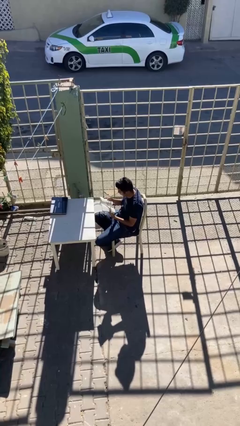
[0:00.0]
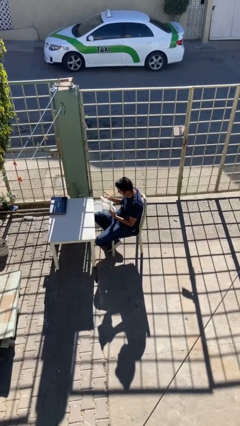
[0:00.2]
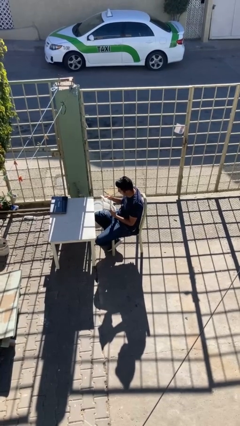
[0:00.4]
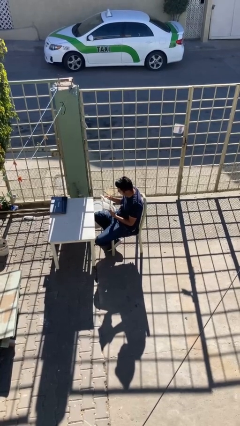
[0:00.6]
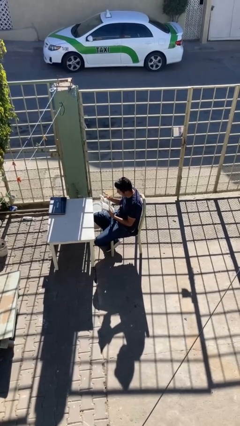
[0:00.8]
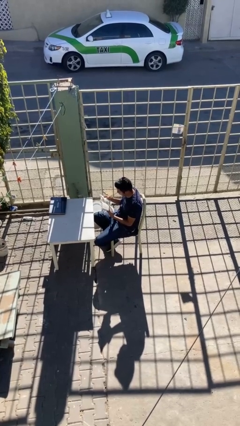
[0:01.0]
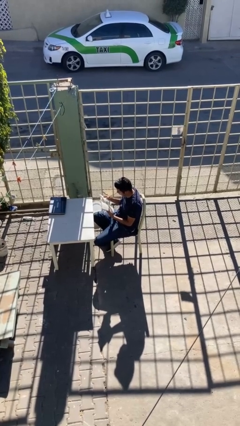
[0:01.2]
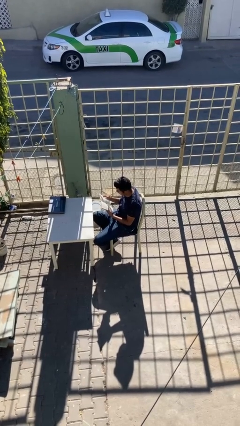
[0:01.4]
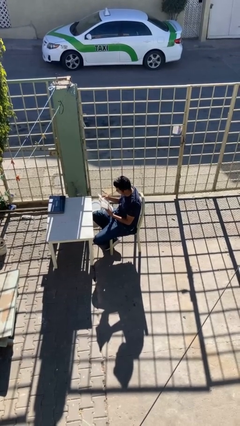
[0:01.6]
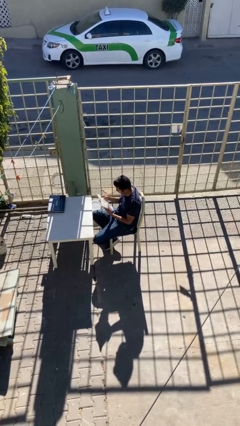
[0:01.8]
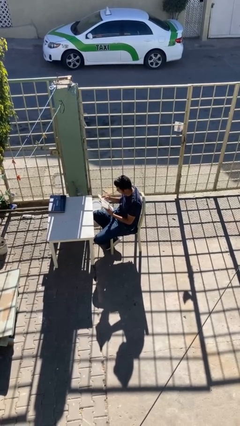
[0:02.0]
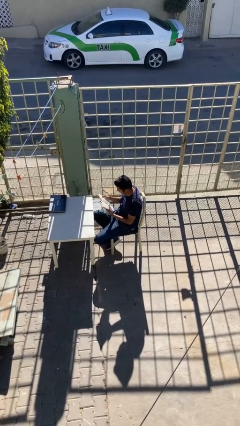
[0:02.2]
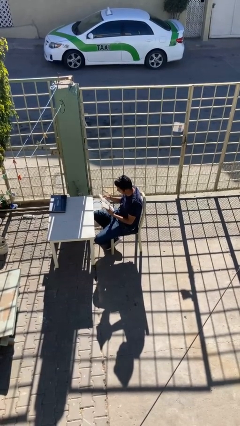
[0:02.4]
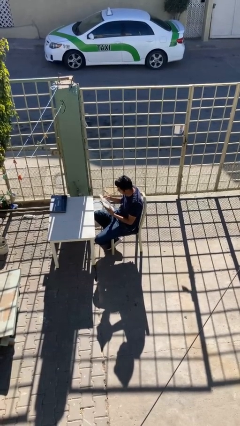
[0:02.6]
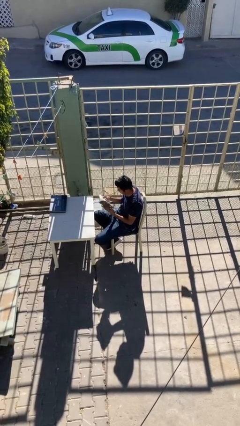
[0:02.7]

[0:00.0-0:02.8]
person reads document

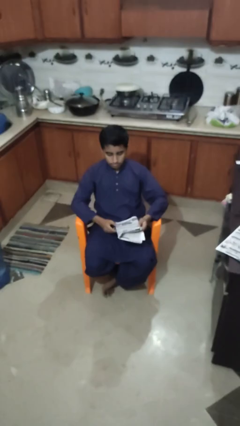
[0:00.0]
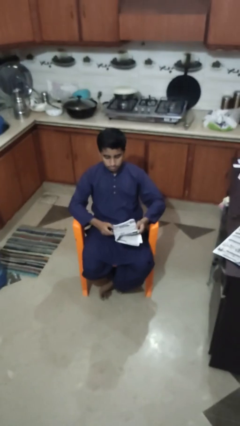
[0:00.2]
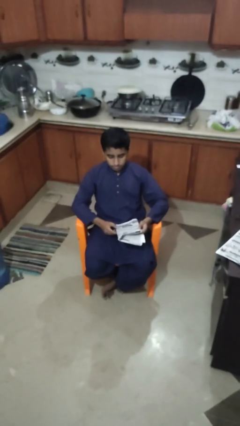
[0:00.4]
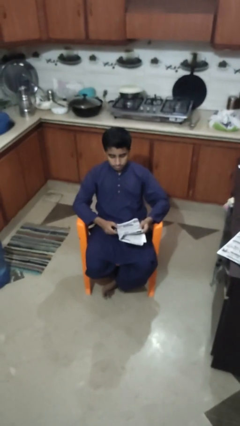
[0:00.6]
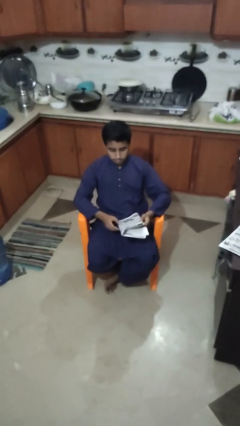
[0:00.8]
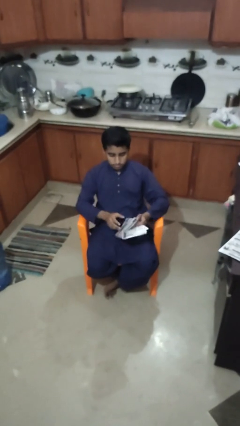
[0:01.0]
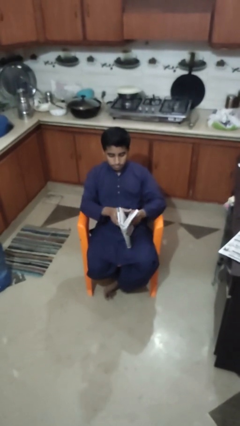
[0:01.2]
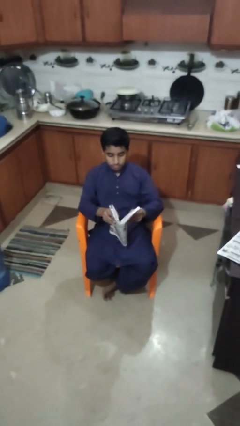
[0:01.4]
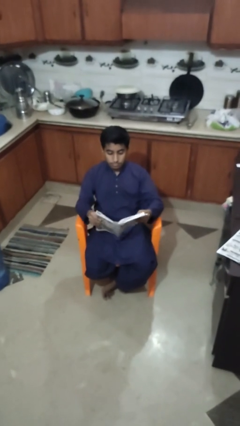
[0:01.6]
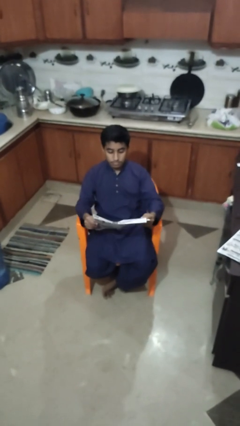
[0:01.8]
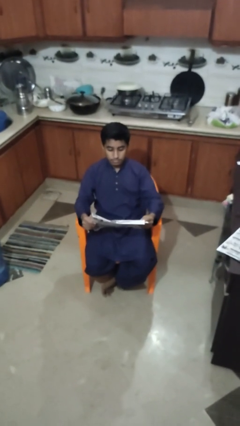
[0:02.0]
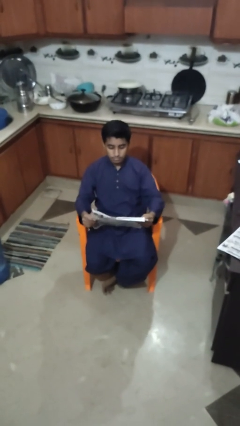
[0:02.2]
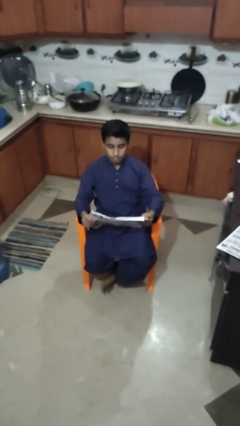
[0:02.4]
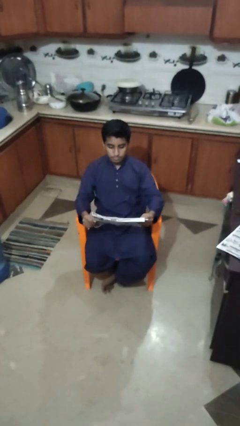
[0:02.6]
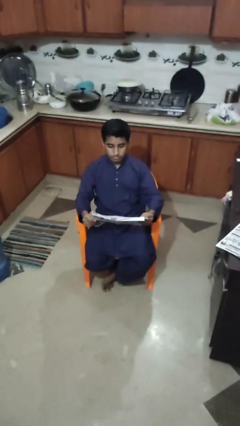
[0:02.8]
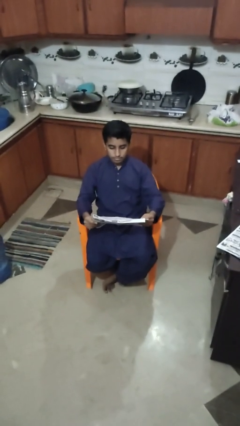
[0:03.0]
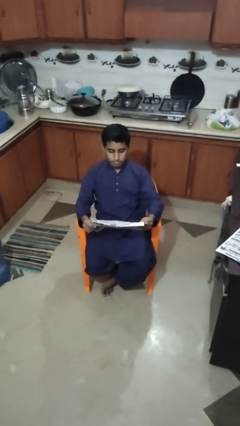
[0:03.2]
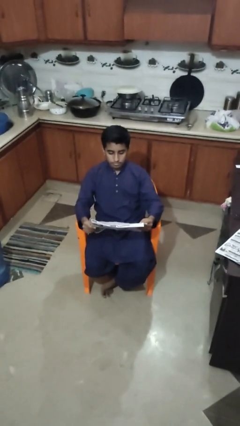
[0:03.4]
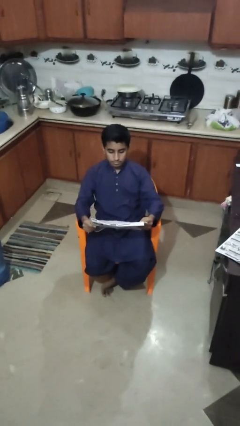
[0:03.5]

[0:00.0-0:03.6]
person reads newspaper

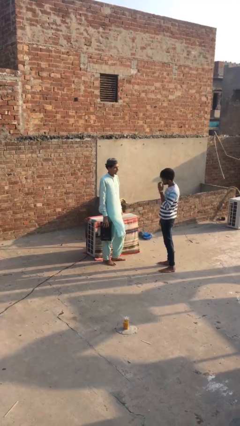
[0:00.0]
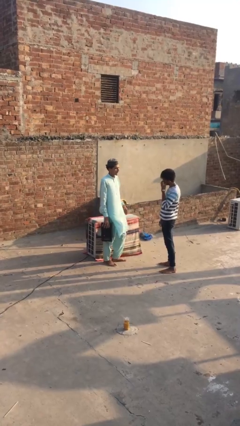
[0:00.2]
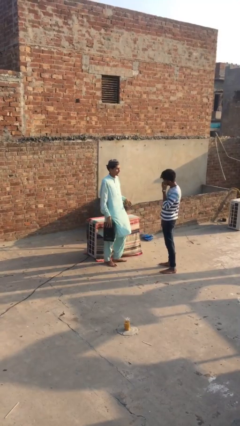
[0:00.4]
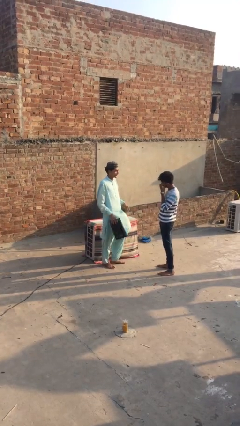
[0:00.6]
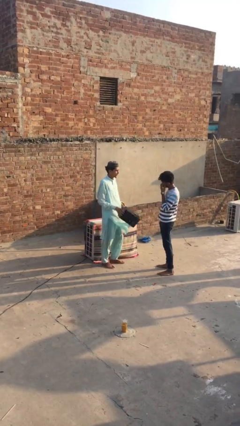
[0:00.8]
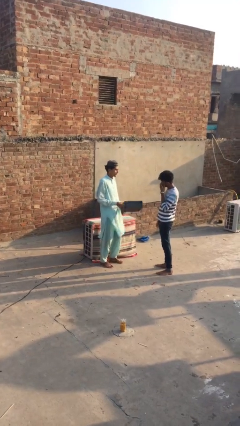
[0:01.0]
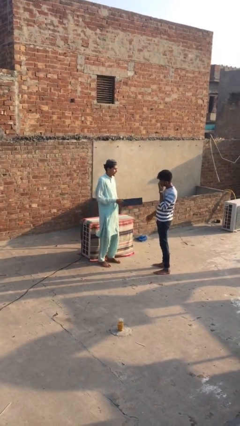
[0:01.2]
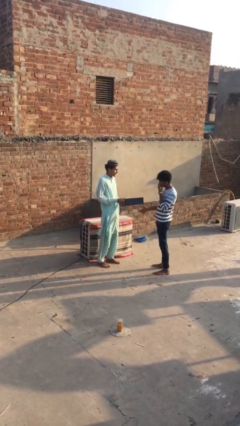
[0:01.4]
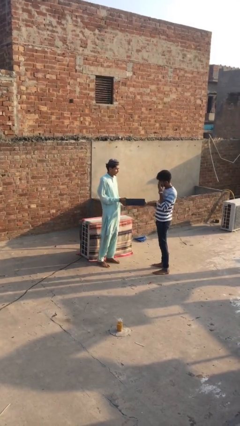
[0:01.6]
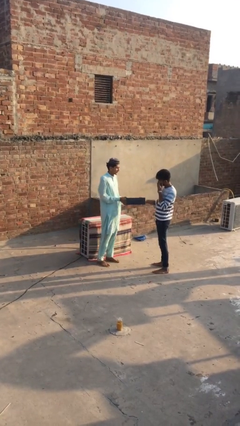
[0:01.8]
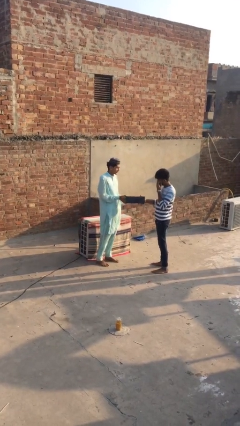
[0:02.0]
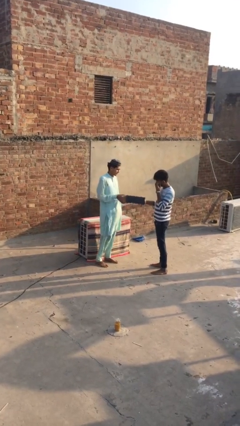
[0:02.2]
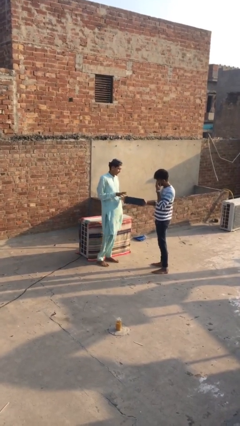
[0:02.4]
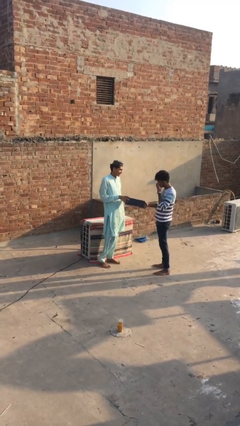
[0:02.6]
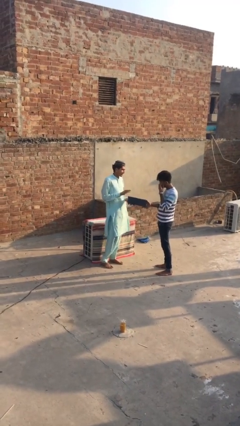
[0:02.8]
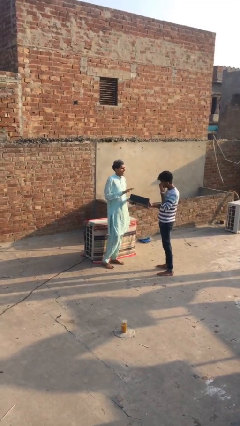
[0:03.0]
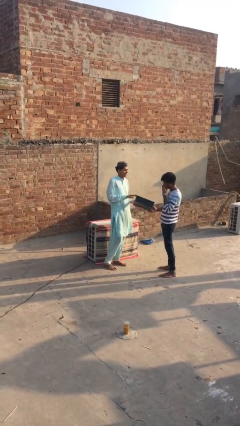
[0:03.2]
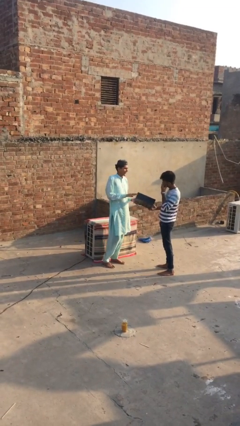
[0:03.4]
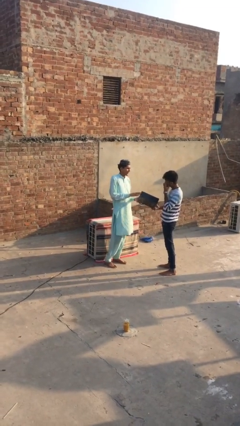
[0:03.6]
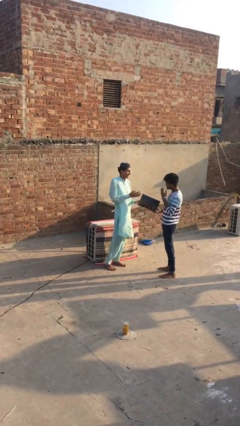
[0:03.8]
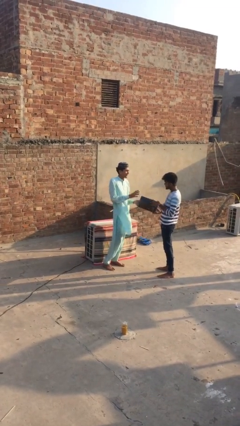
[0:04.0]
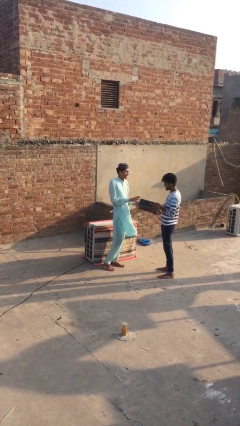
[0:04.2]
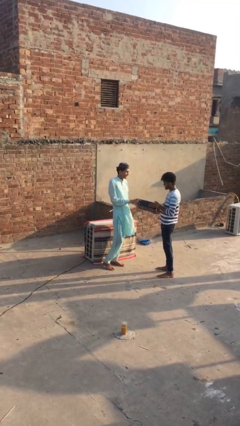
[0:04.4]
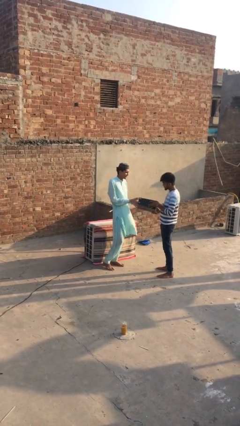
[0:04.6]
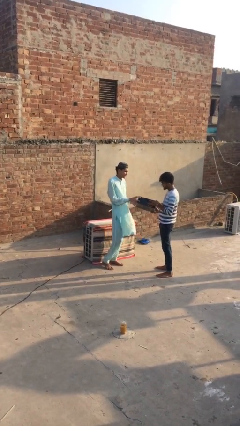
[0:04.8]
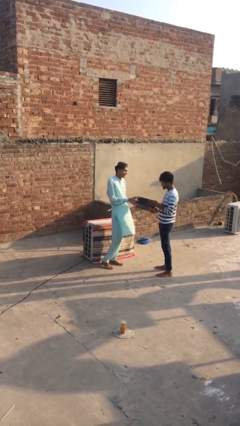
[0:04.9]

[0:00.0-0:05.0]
person transfers object to person

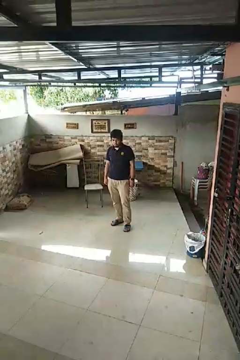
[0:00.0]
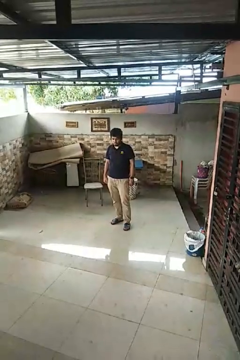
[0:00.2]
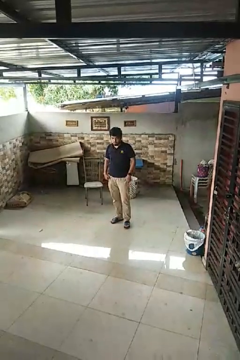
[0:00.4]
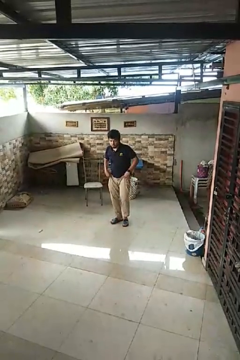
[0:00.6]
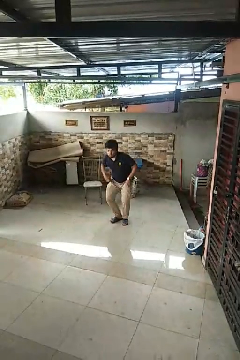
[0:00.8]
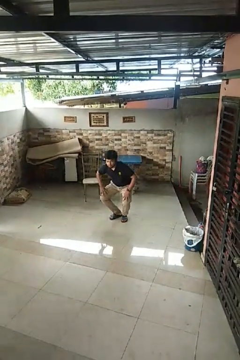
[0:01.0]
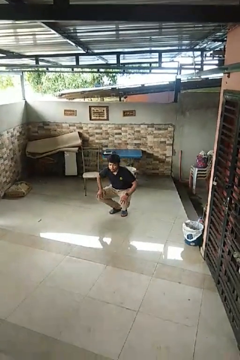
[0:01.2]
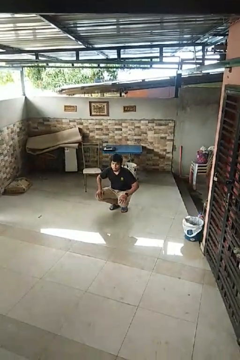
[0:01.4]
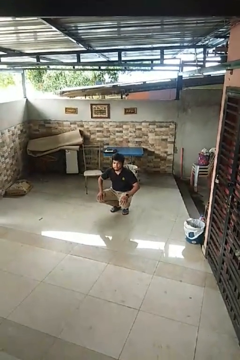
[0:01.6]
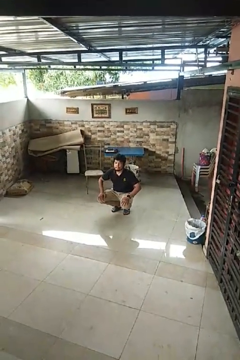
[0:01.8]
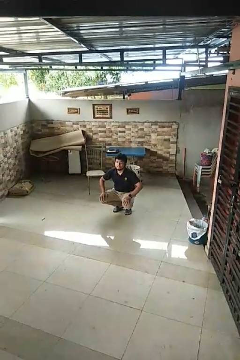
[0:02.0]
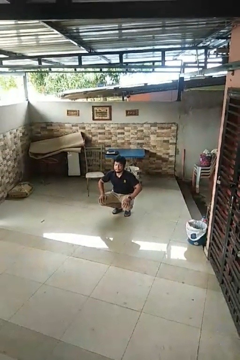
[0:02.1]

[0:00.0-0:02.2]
person squats

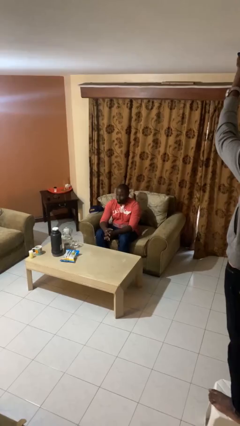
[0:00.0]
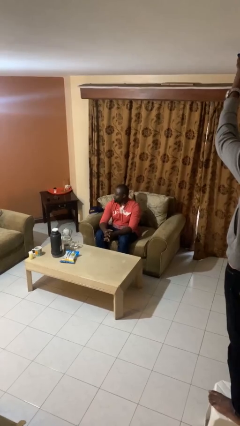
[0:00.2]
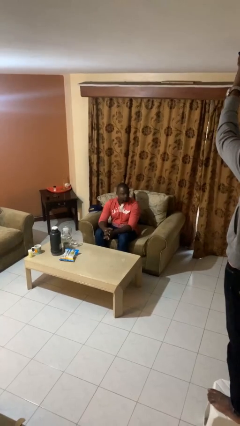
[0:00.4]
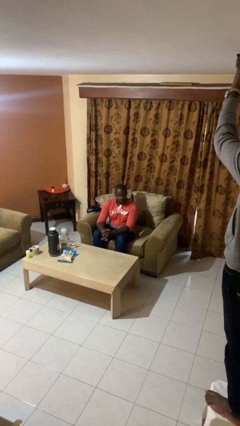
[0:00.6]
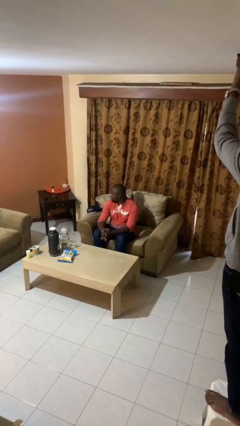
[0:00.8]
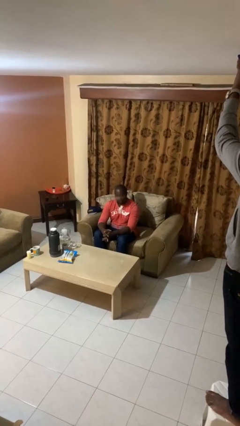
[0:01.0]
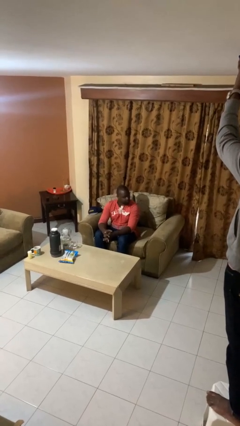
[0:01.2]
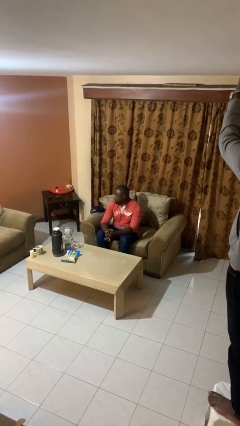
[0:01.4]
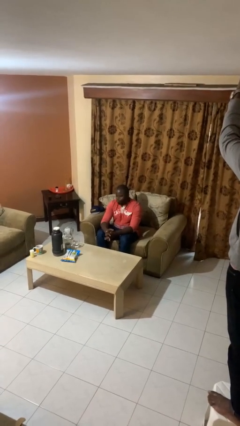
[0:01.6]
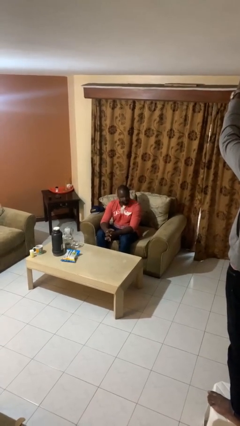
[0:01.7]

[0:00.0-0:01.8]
person shakes head

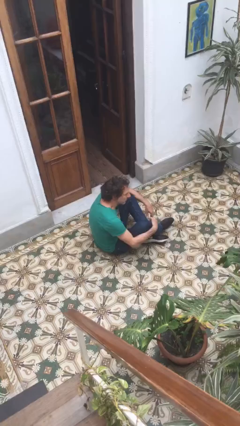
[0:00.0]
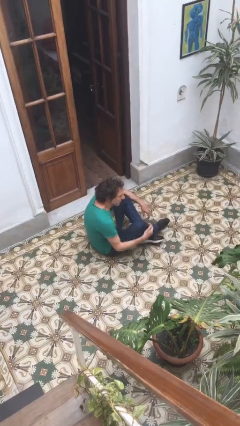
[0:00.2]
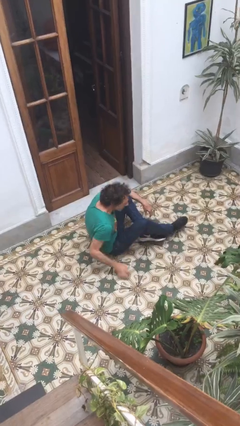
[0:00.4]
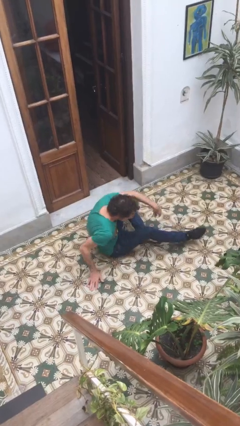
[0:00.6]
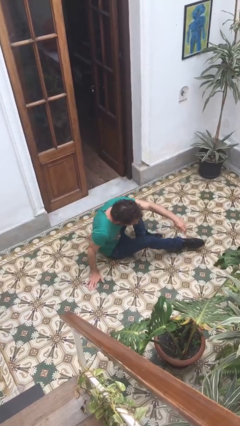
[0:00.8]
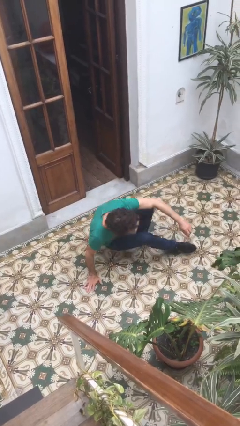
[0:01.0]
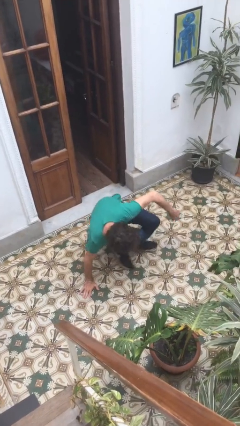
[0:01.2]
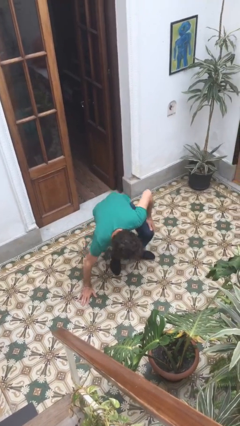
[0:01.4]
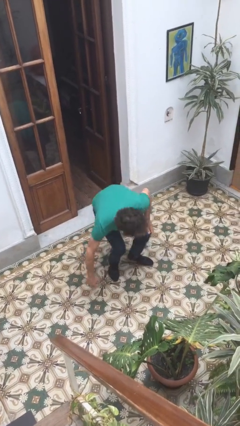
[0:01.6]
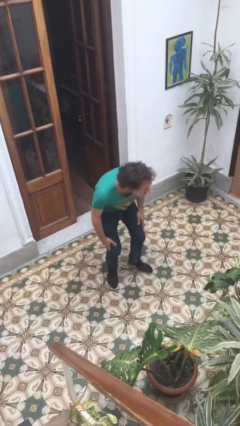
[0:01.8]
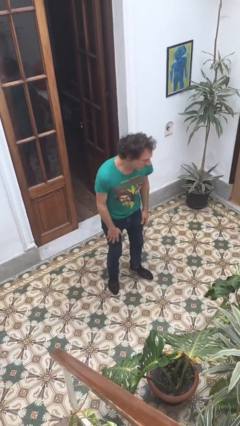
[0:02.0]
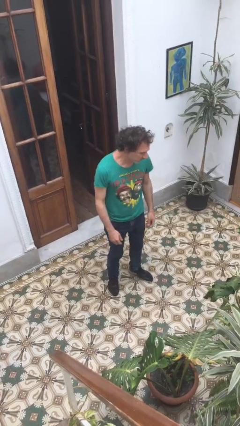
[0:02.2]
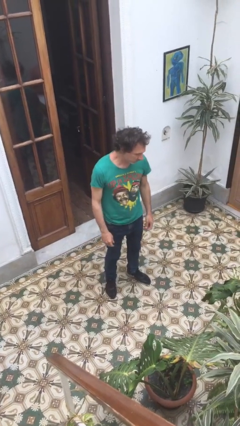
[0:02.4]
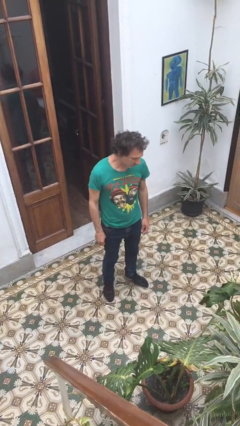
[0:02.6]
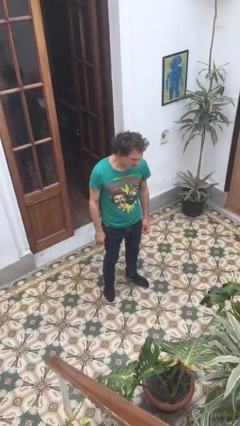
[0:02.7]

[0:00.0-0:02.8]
person stands up
